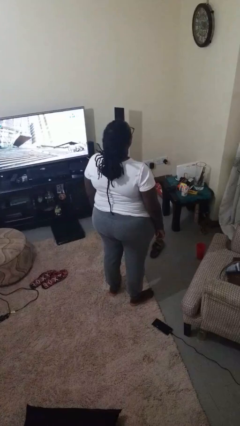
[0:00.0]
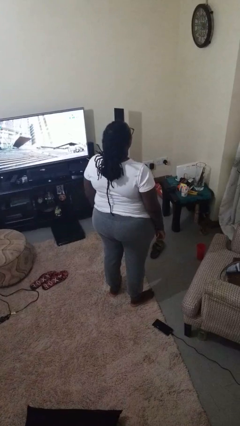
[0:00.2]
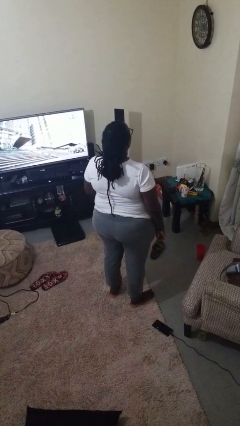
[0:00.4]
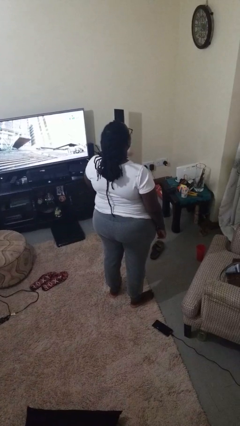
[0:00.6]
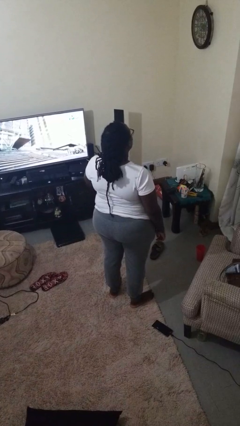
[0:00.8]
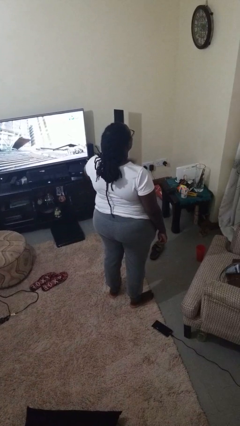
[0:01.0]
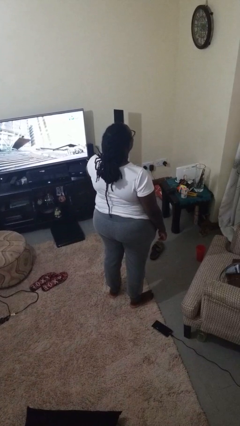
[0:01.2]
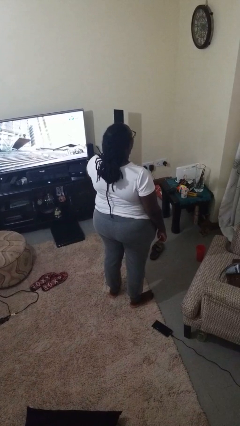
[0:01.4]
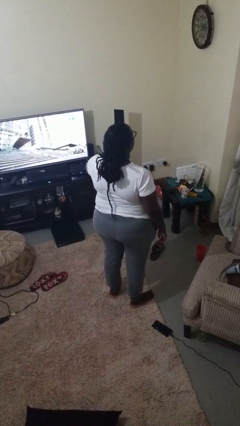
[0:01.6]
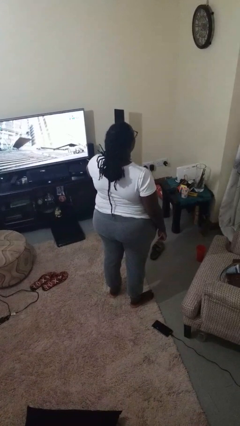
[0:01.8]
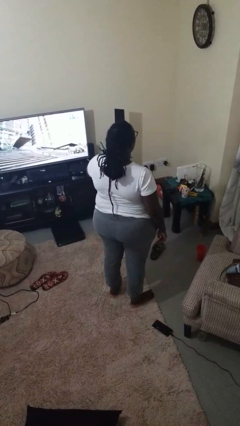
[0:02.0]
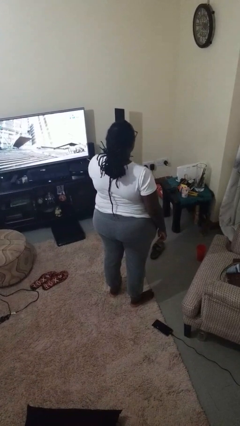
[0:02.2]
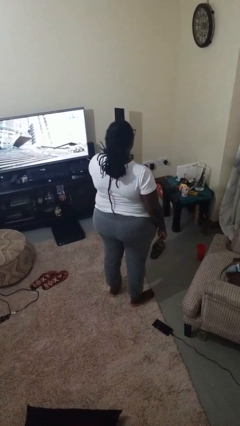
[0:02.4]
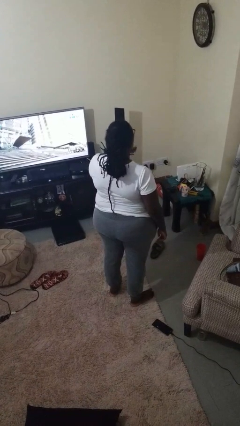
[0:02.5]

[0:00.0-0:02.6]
person drums on chest

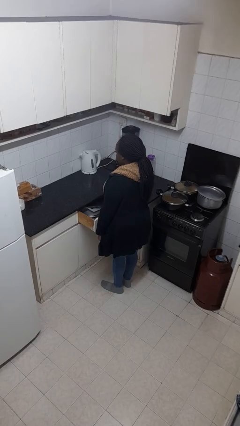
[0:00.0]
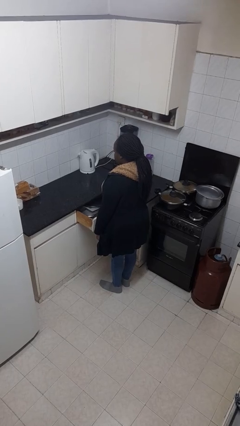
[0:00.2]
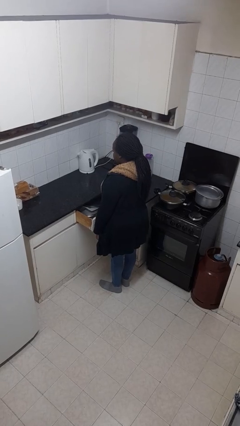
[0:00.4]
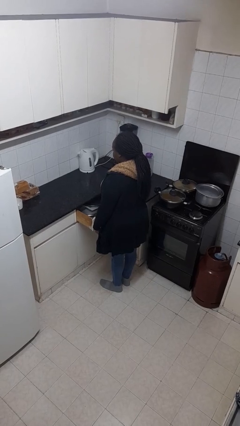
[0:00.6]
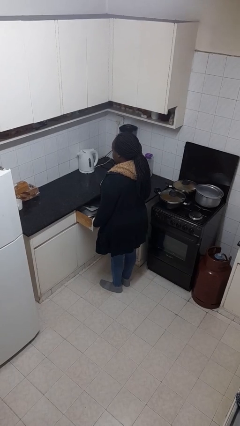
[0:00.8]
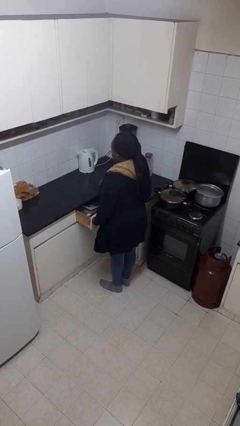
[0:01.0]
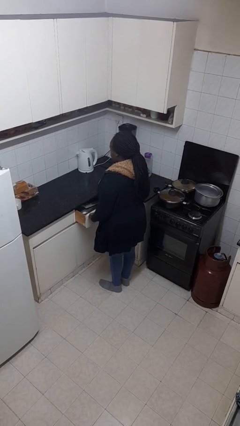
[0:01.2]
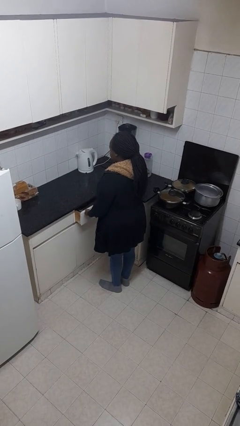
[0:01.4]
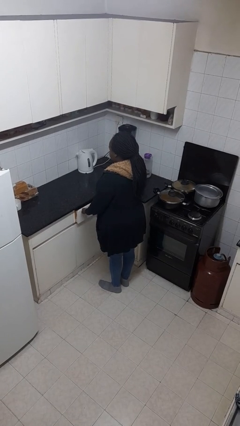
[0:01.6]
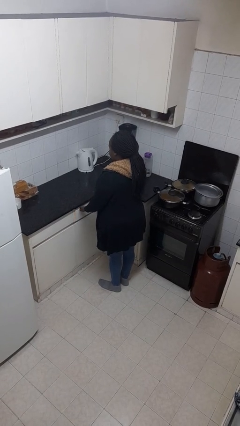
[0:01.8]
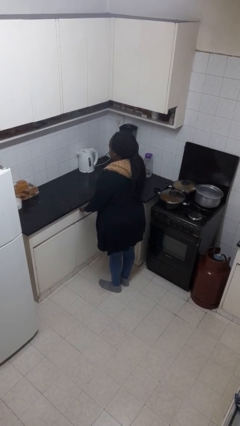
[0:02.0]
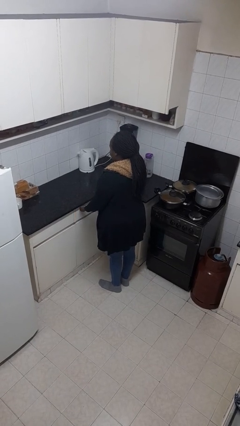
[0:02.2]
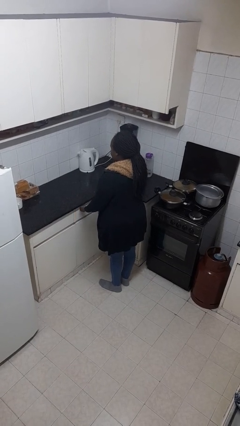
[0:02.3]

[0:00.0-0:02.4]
person closes kitchen drawer

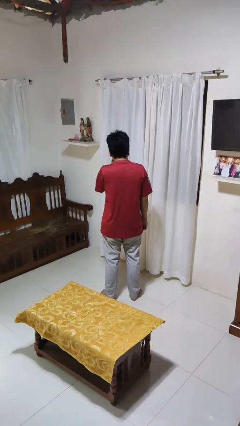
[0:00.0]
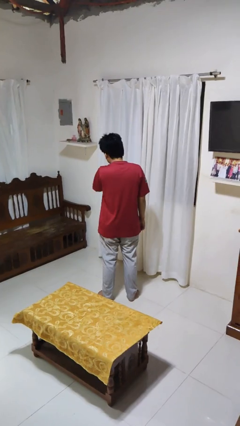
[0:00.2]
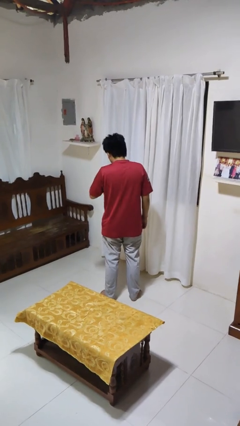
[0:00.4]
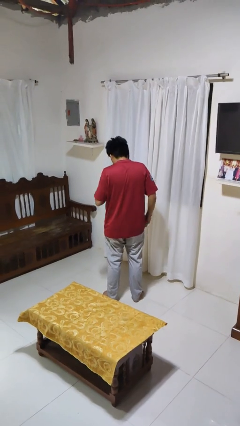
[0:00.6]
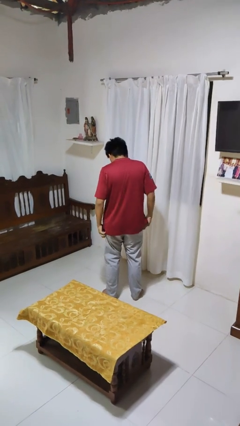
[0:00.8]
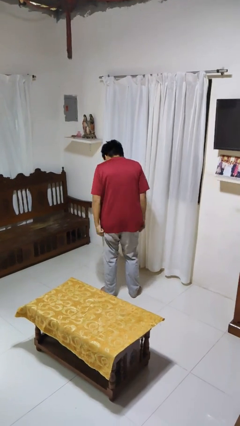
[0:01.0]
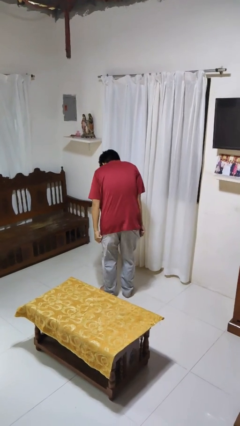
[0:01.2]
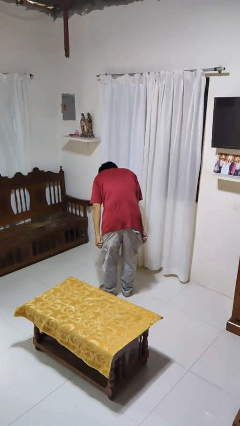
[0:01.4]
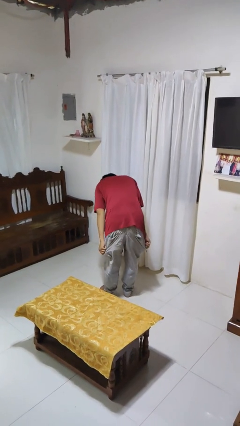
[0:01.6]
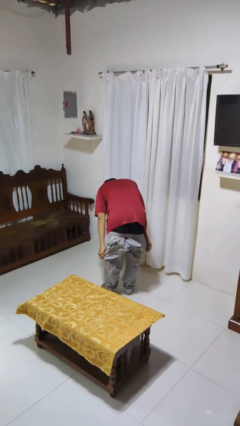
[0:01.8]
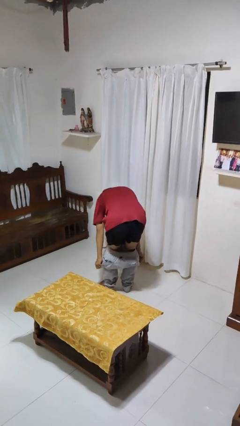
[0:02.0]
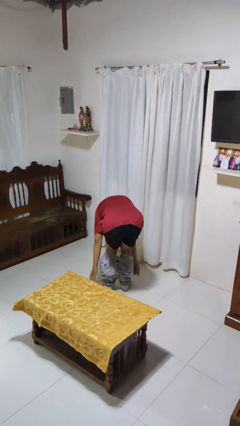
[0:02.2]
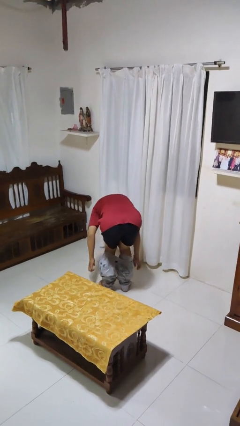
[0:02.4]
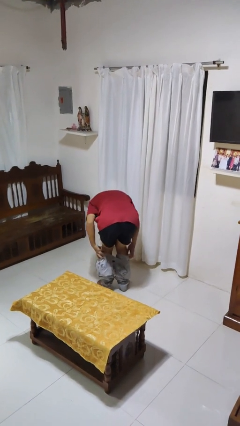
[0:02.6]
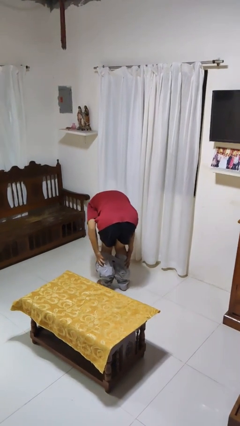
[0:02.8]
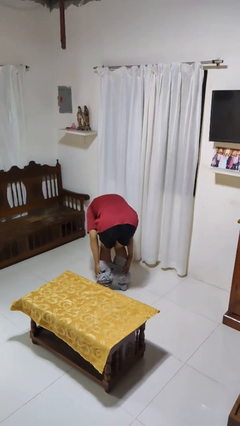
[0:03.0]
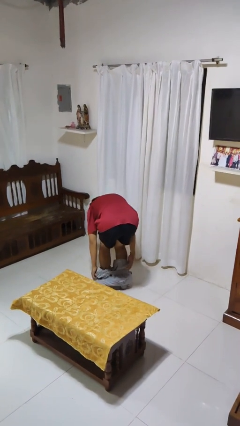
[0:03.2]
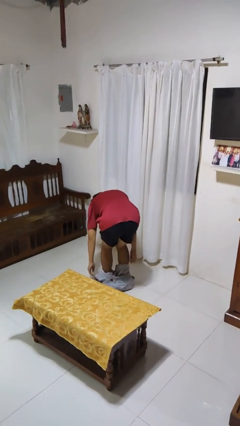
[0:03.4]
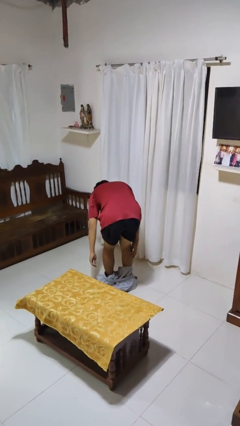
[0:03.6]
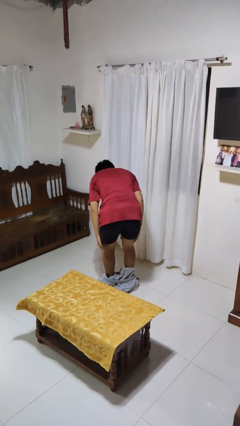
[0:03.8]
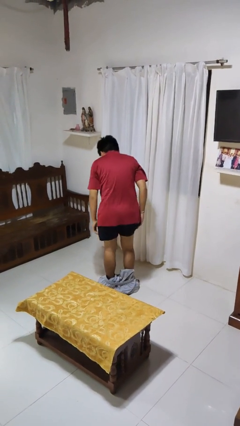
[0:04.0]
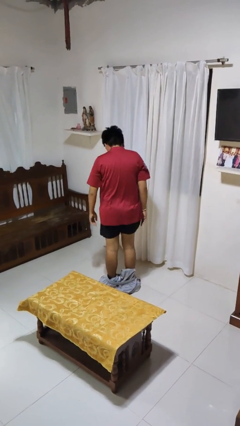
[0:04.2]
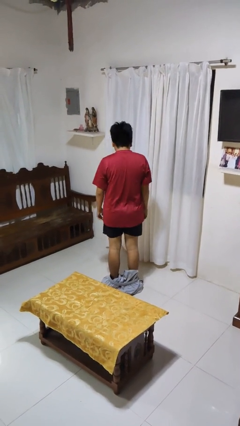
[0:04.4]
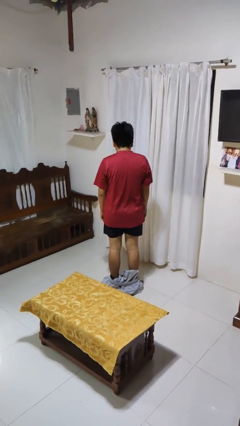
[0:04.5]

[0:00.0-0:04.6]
person takes off pants

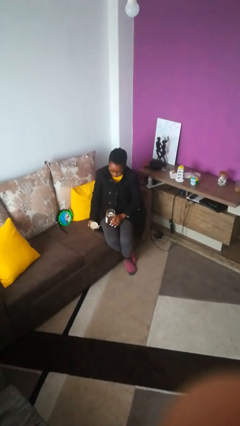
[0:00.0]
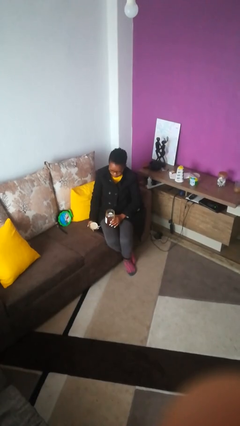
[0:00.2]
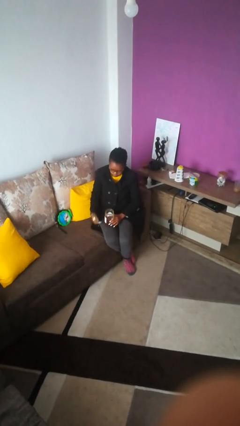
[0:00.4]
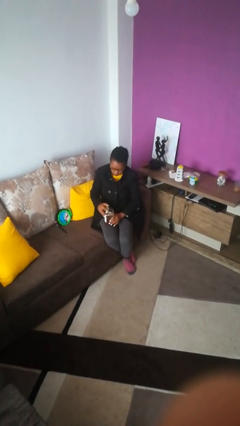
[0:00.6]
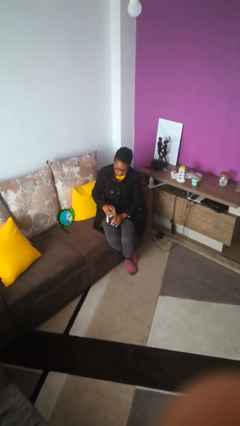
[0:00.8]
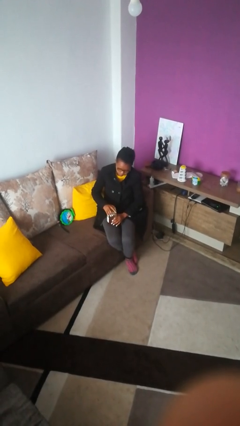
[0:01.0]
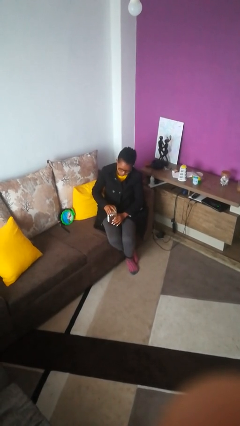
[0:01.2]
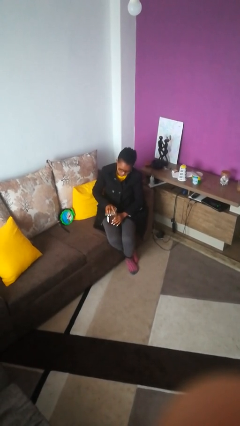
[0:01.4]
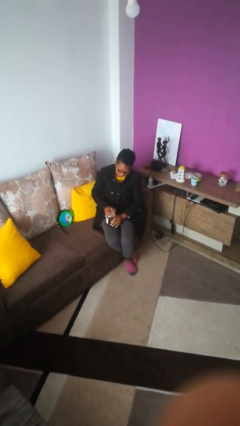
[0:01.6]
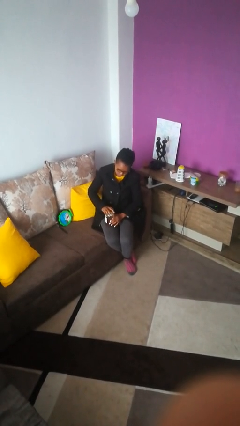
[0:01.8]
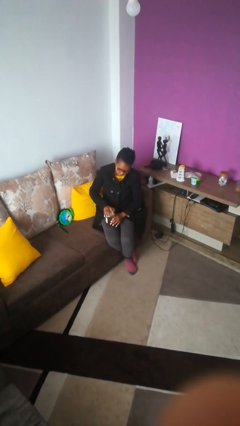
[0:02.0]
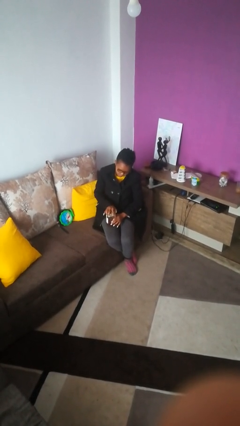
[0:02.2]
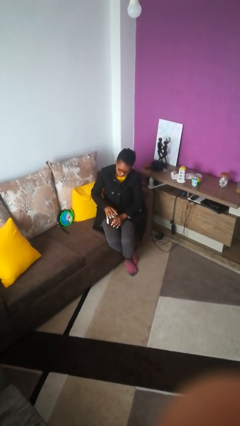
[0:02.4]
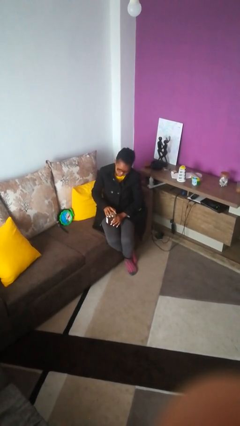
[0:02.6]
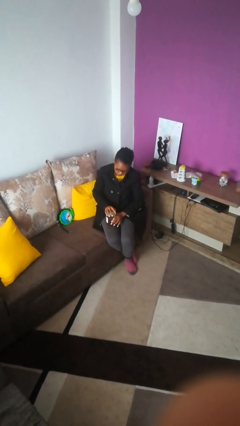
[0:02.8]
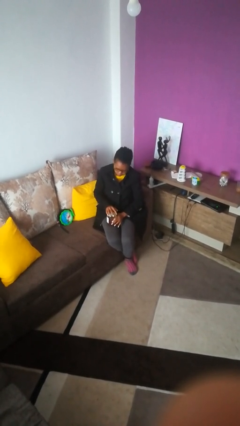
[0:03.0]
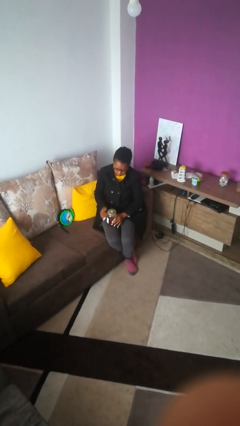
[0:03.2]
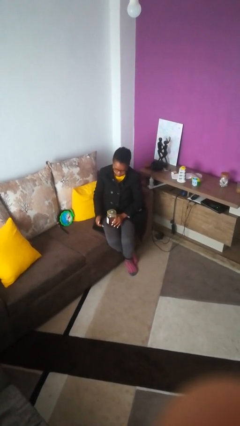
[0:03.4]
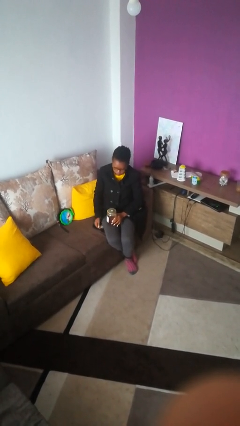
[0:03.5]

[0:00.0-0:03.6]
person closes jar

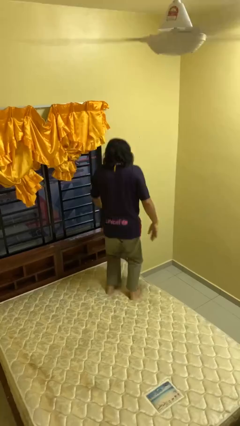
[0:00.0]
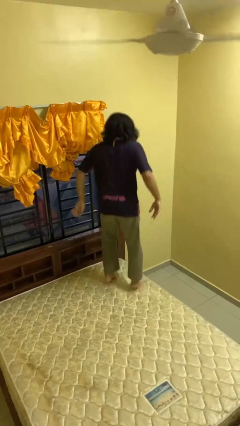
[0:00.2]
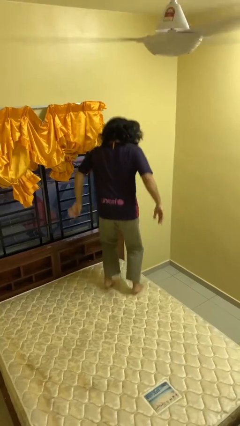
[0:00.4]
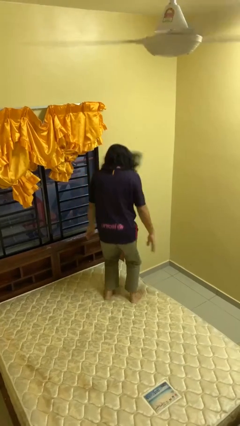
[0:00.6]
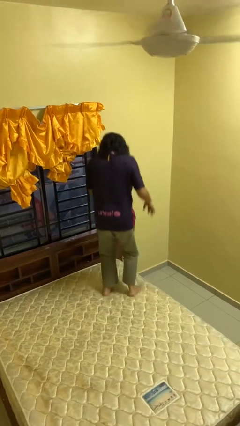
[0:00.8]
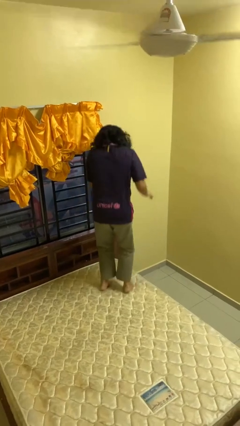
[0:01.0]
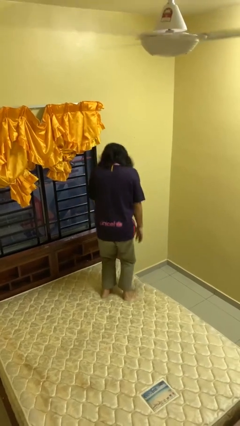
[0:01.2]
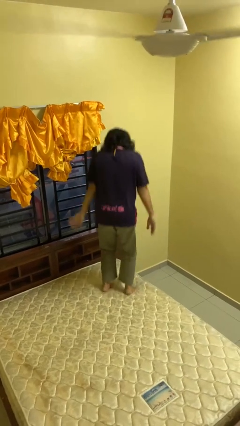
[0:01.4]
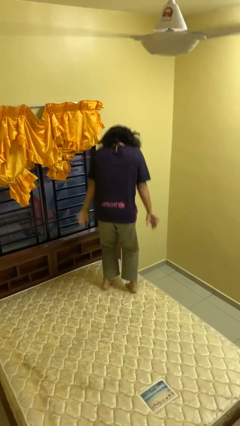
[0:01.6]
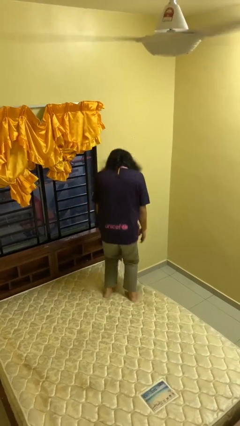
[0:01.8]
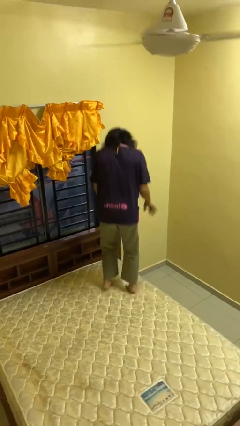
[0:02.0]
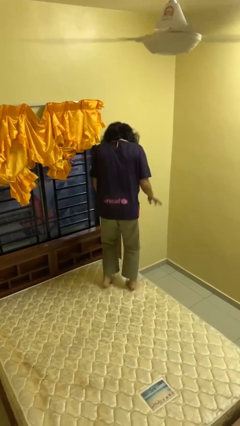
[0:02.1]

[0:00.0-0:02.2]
person jumps on bed

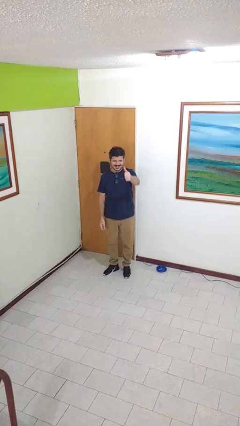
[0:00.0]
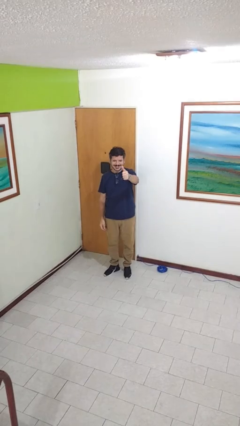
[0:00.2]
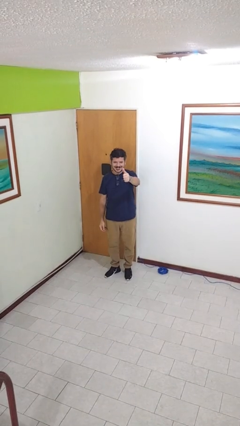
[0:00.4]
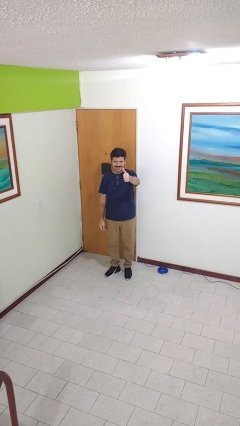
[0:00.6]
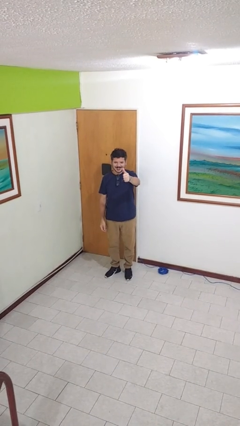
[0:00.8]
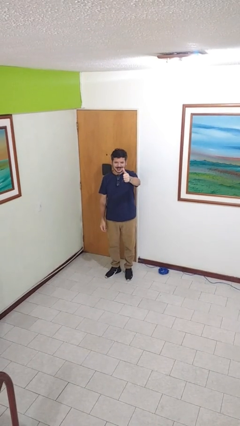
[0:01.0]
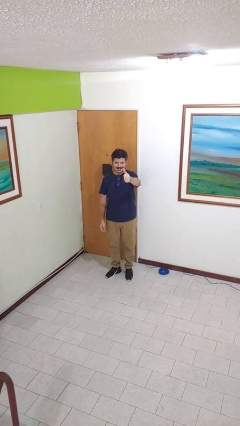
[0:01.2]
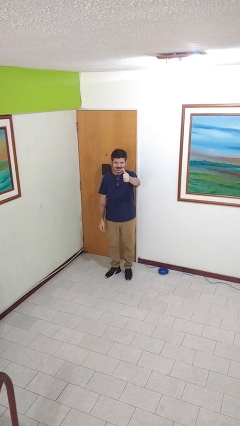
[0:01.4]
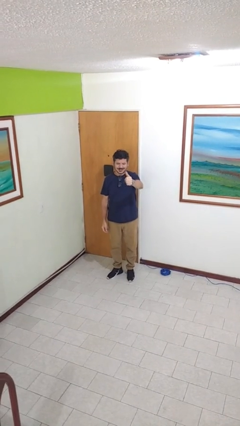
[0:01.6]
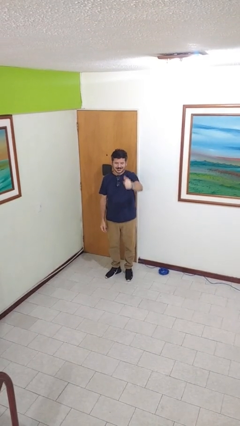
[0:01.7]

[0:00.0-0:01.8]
person gestures thumbs up
